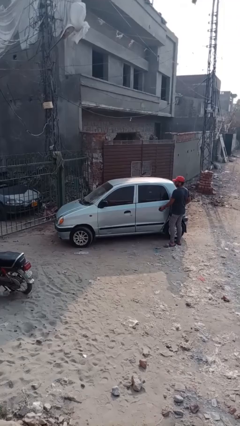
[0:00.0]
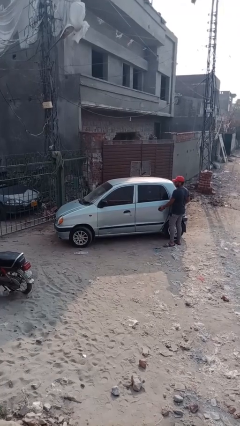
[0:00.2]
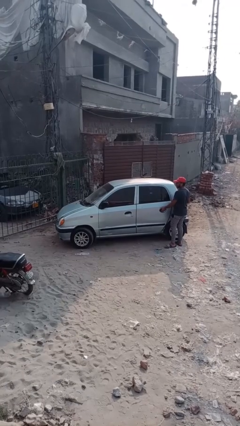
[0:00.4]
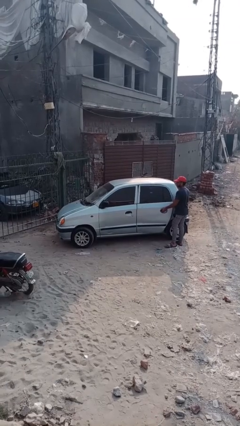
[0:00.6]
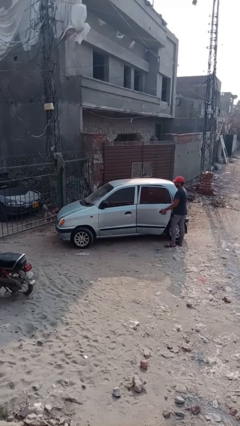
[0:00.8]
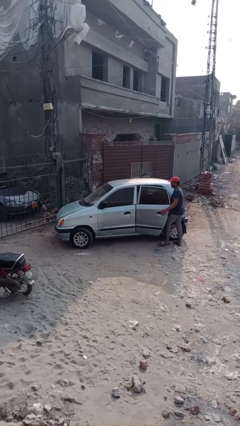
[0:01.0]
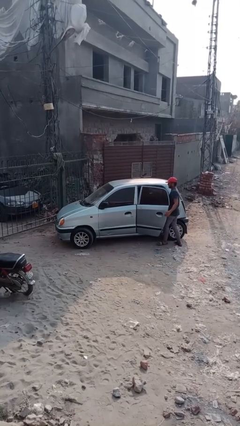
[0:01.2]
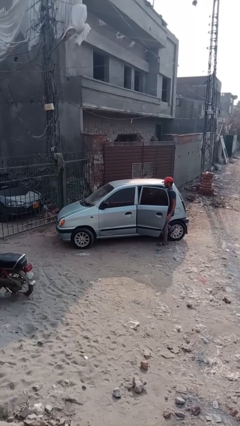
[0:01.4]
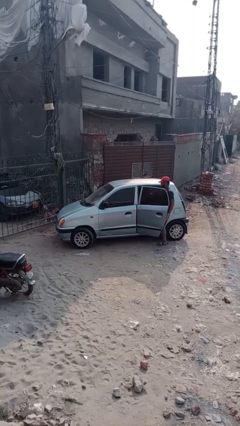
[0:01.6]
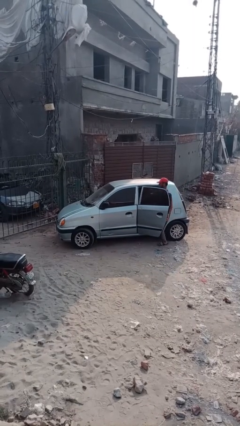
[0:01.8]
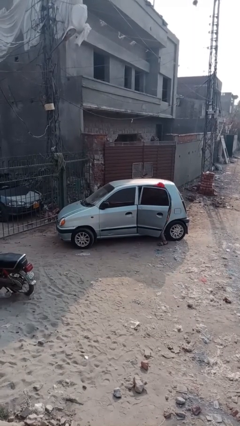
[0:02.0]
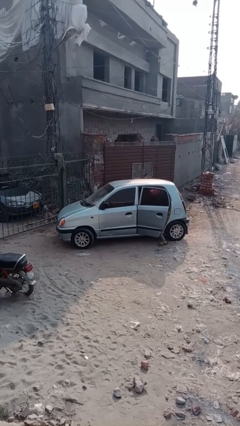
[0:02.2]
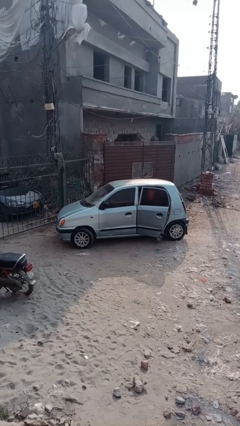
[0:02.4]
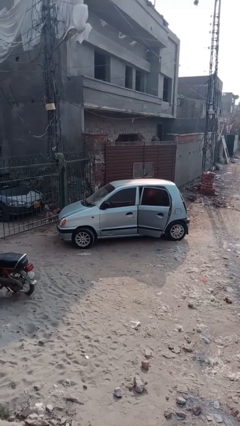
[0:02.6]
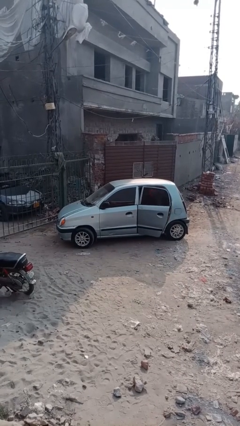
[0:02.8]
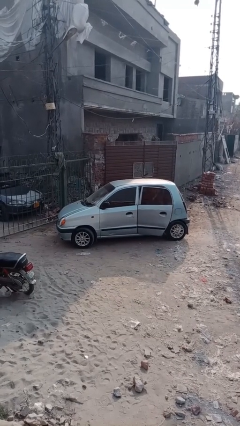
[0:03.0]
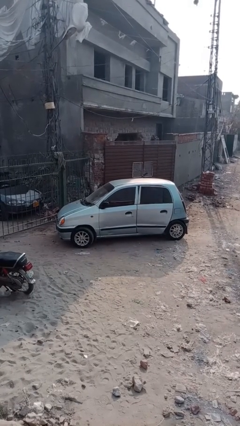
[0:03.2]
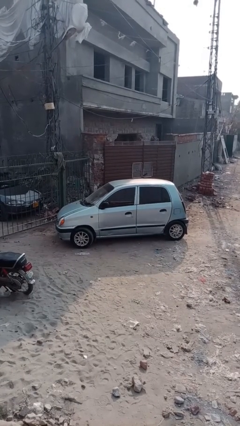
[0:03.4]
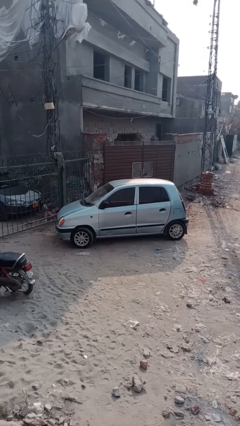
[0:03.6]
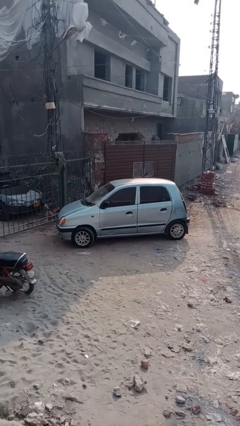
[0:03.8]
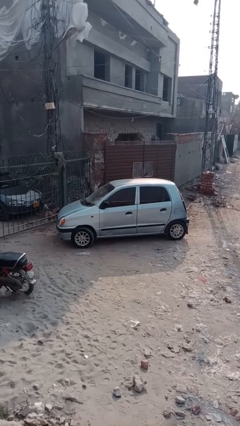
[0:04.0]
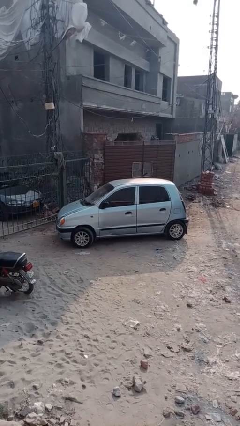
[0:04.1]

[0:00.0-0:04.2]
car picks up person

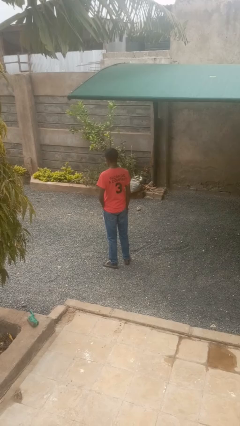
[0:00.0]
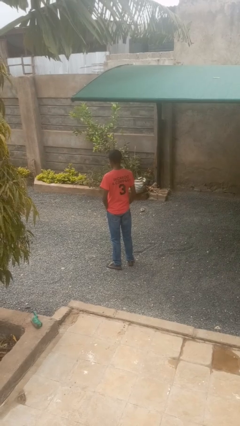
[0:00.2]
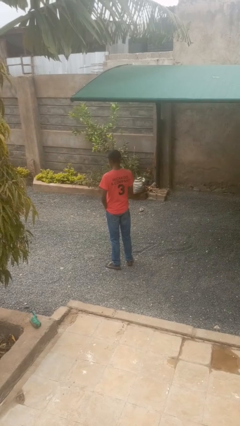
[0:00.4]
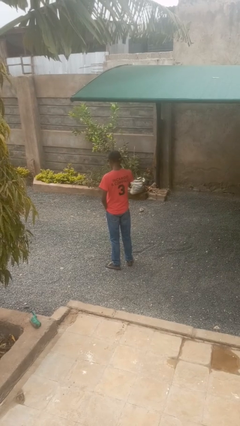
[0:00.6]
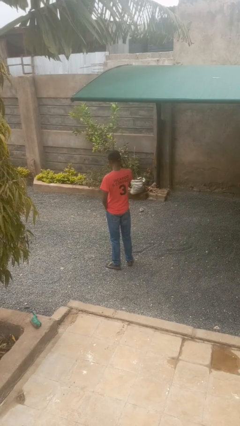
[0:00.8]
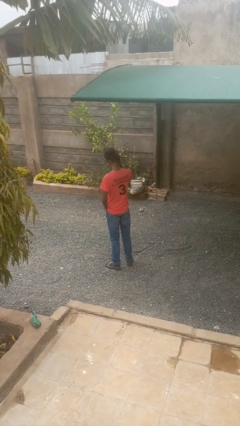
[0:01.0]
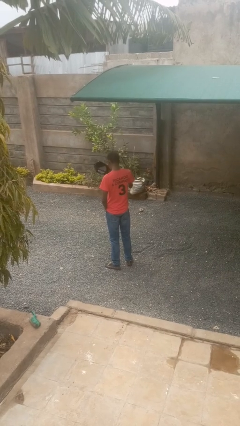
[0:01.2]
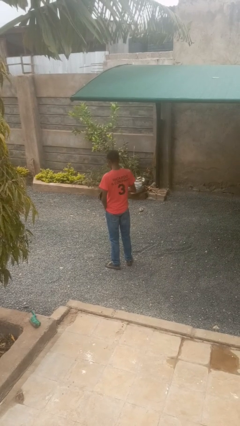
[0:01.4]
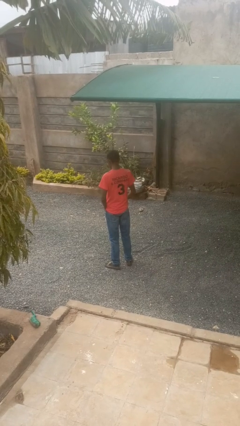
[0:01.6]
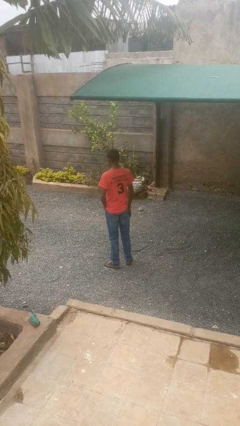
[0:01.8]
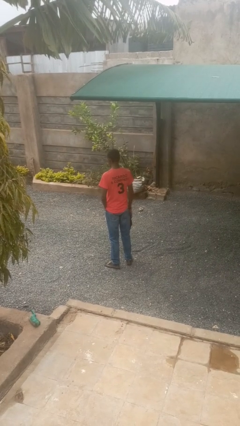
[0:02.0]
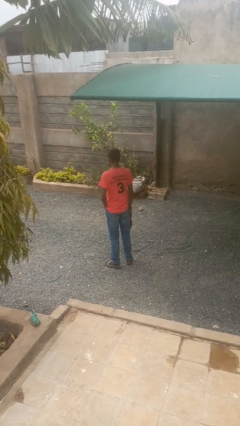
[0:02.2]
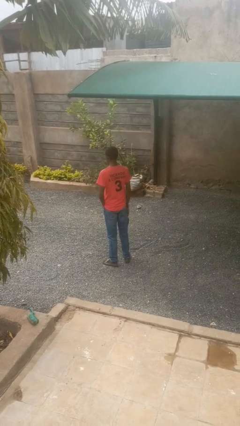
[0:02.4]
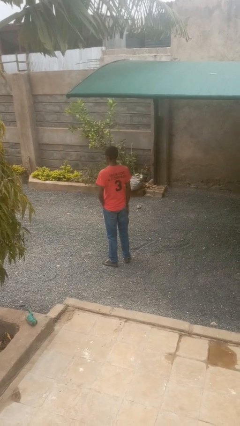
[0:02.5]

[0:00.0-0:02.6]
person takes off hat

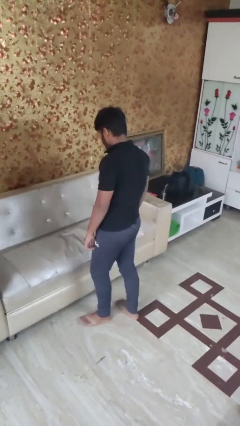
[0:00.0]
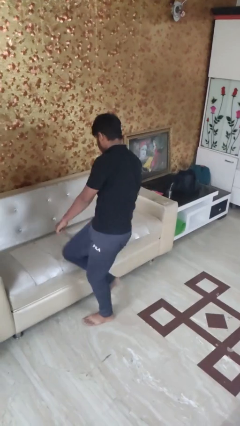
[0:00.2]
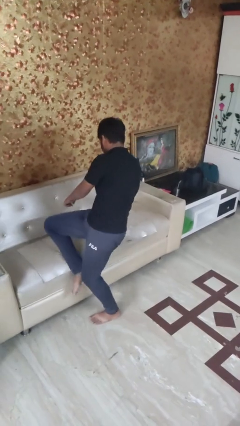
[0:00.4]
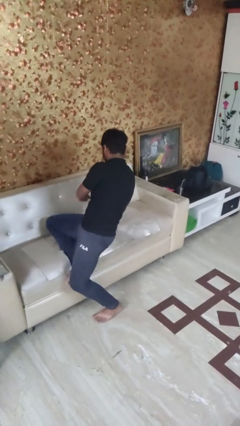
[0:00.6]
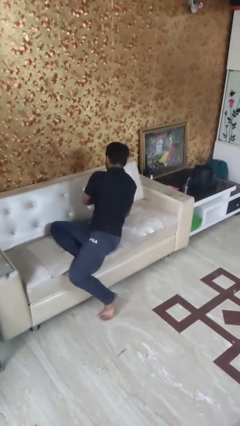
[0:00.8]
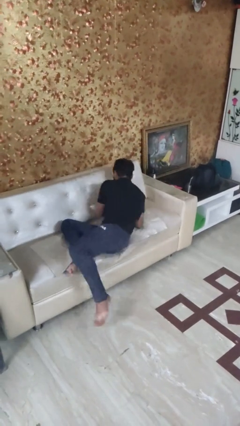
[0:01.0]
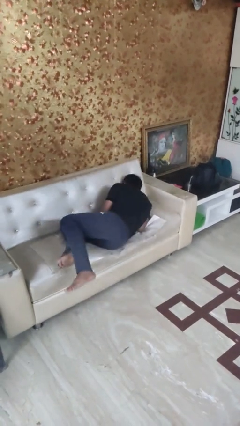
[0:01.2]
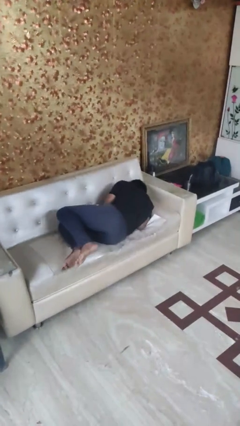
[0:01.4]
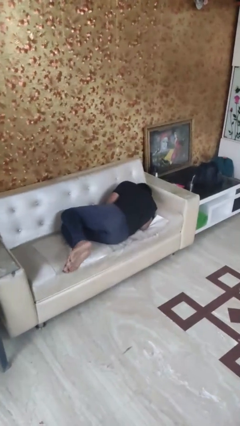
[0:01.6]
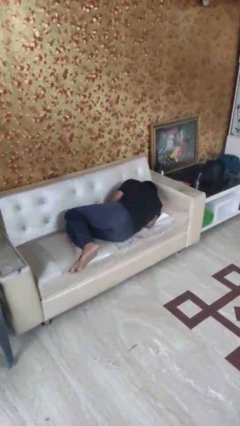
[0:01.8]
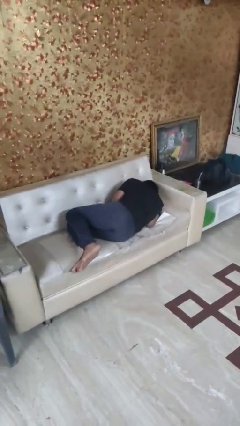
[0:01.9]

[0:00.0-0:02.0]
person lies down on couch

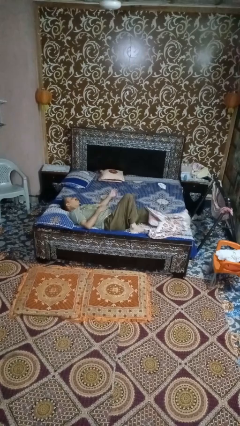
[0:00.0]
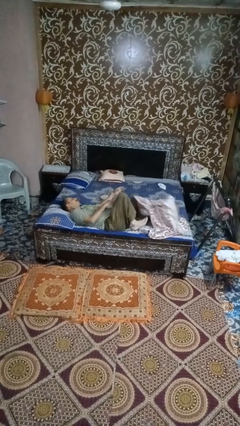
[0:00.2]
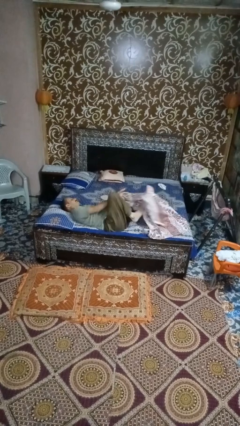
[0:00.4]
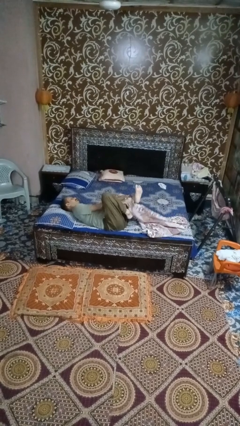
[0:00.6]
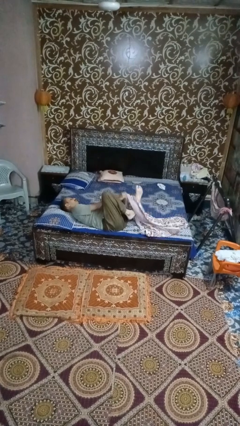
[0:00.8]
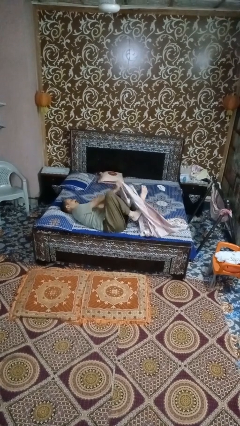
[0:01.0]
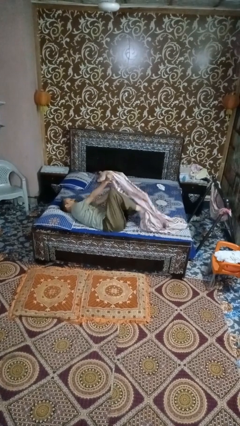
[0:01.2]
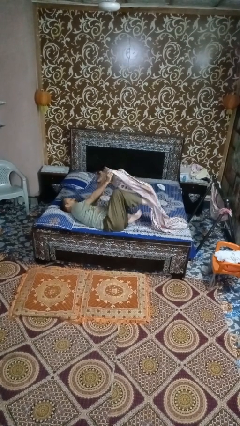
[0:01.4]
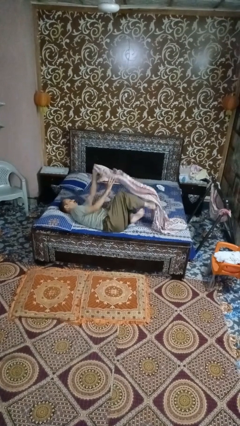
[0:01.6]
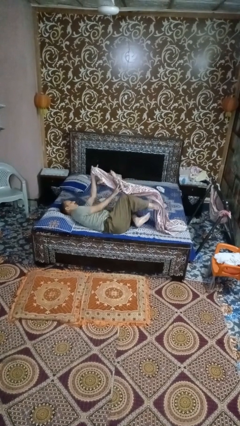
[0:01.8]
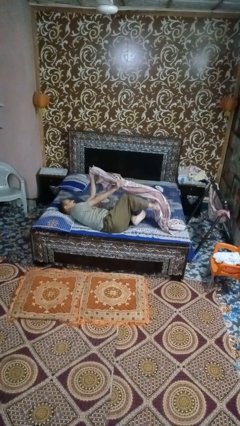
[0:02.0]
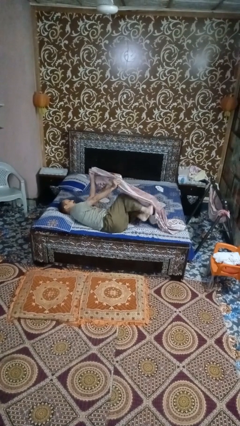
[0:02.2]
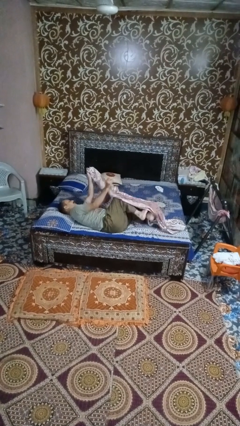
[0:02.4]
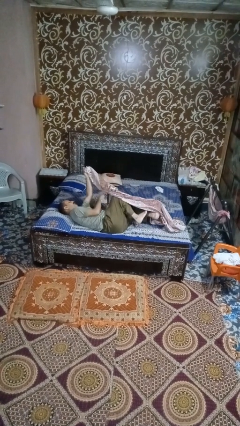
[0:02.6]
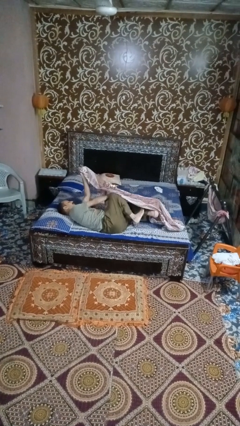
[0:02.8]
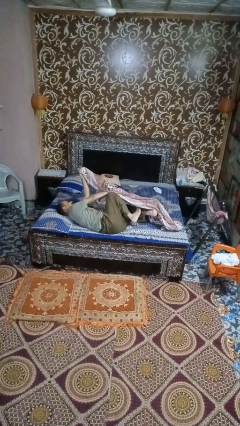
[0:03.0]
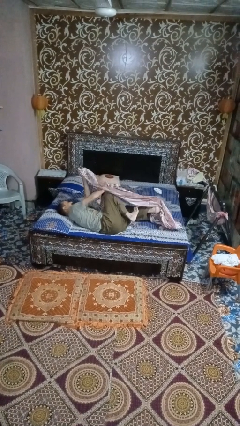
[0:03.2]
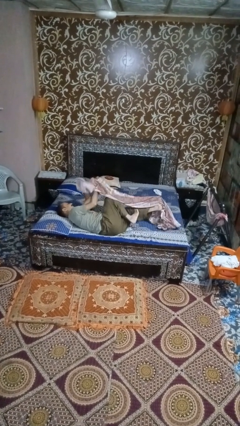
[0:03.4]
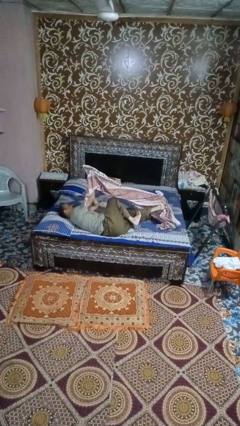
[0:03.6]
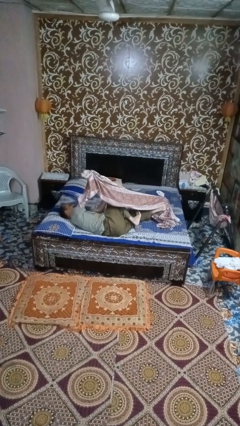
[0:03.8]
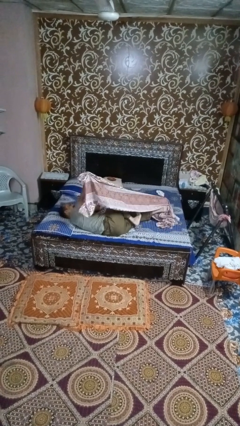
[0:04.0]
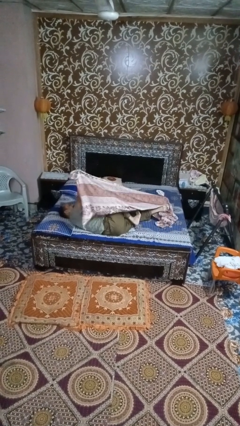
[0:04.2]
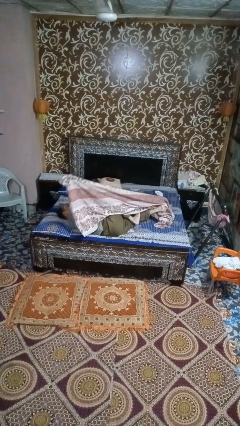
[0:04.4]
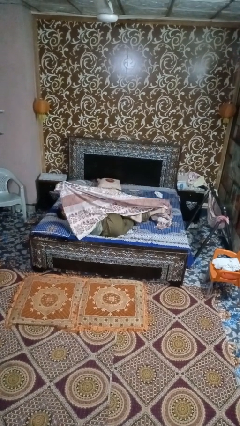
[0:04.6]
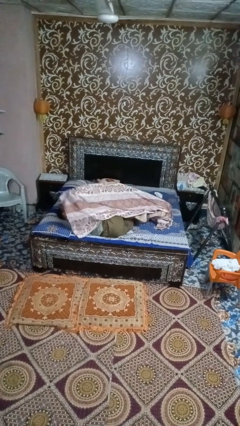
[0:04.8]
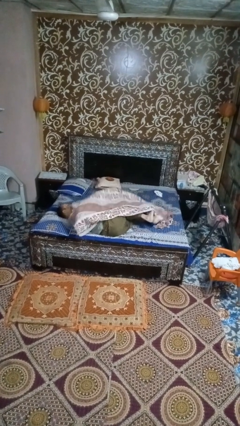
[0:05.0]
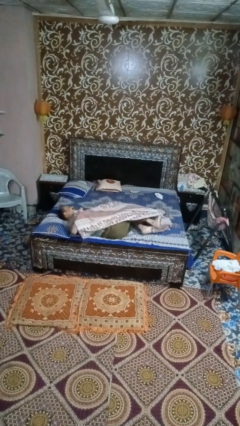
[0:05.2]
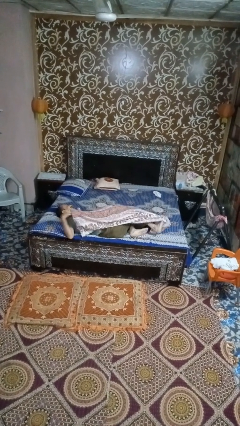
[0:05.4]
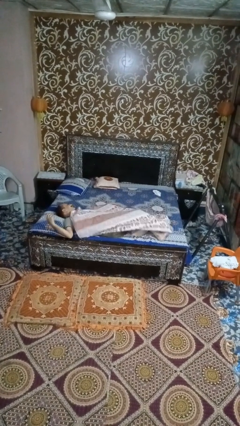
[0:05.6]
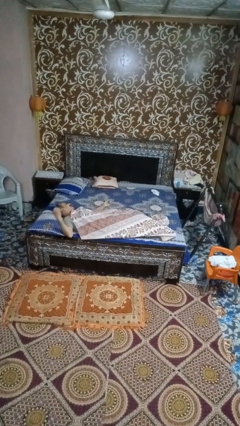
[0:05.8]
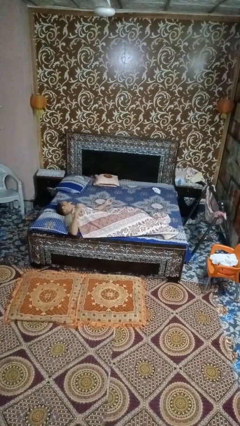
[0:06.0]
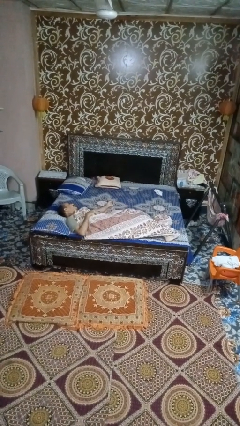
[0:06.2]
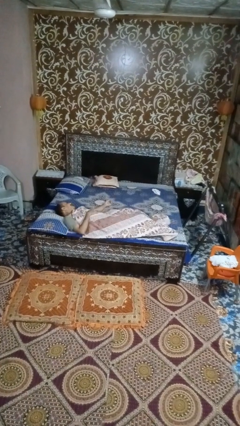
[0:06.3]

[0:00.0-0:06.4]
person covers with bedsheets

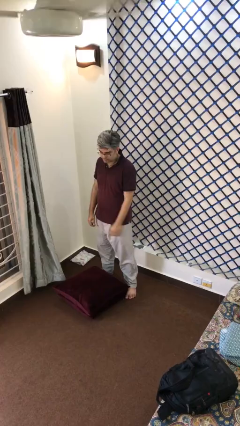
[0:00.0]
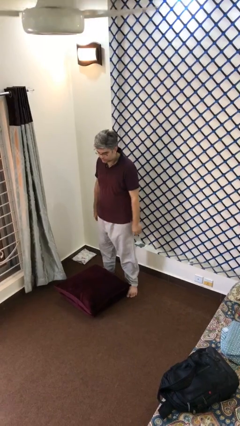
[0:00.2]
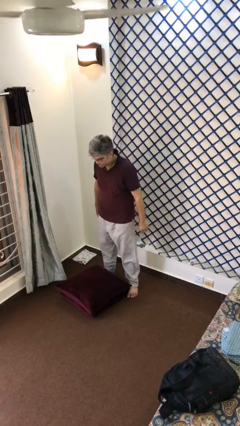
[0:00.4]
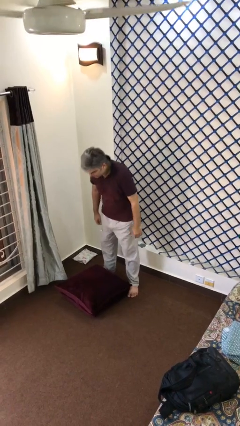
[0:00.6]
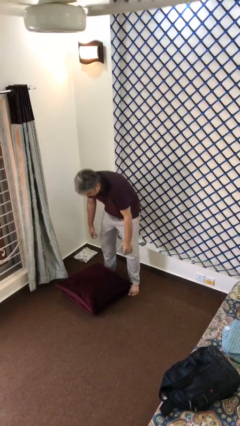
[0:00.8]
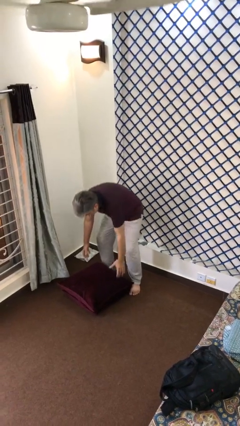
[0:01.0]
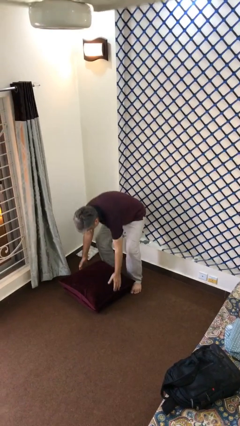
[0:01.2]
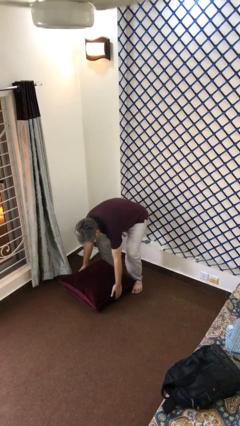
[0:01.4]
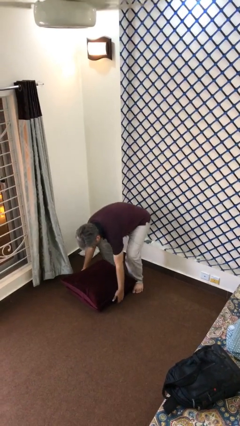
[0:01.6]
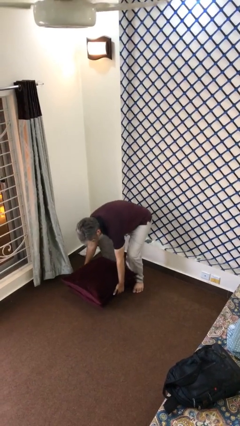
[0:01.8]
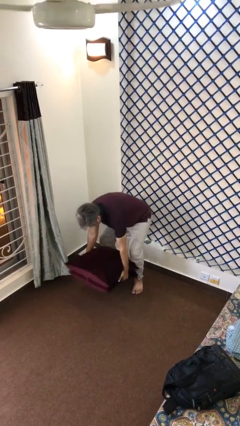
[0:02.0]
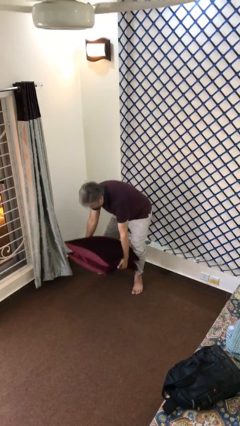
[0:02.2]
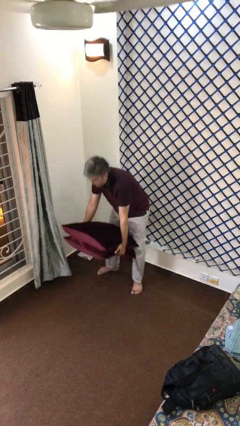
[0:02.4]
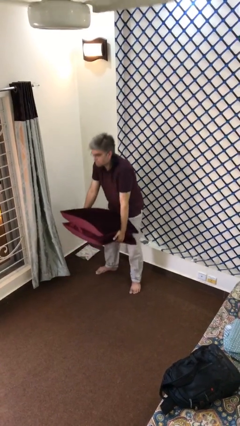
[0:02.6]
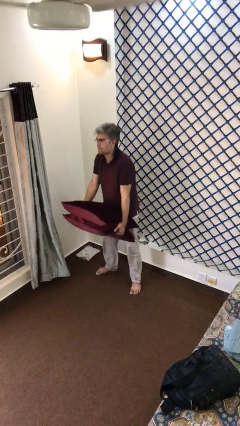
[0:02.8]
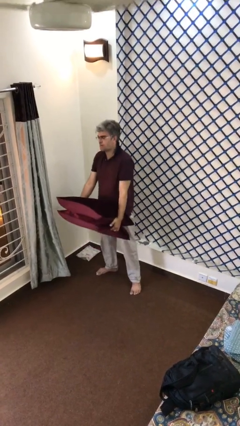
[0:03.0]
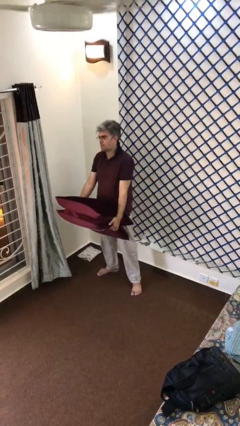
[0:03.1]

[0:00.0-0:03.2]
person picks up object from floor
